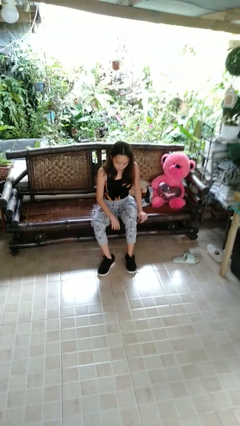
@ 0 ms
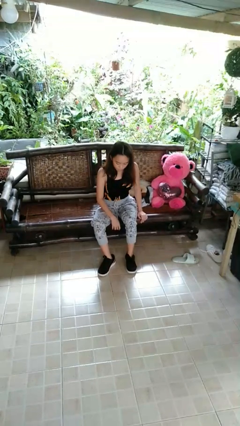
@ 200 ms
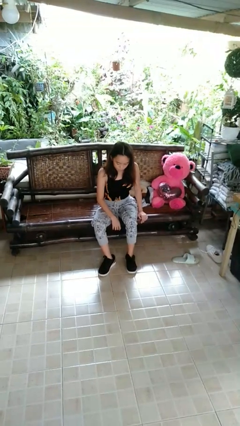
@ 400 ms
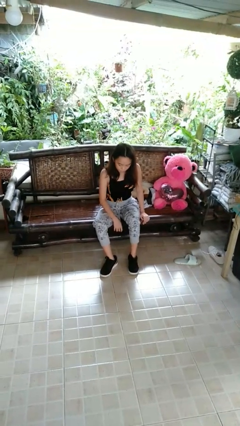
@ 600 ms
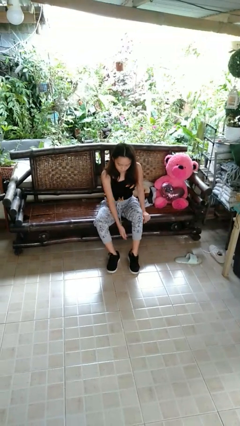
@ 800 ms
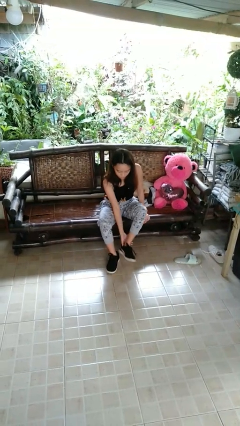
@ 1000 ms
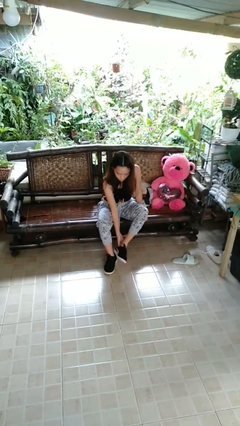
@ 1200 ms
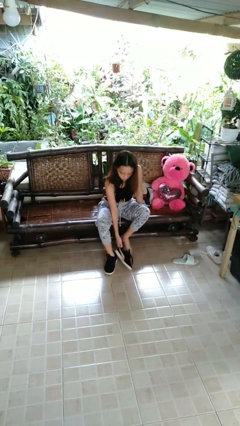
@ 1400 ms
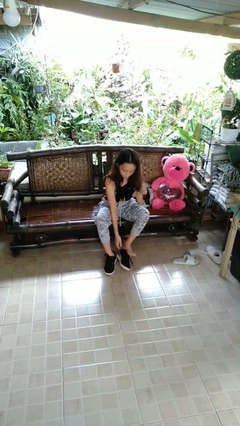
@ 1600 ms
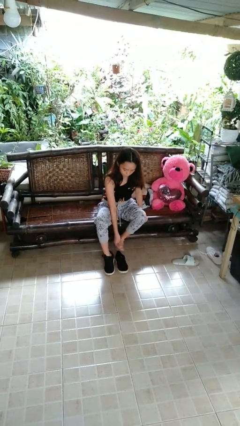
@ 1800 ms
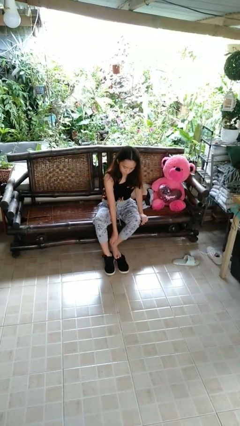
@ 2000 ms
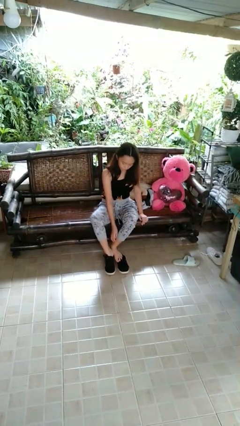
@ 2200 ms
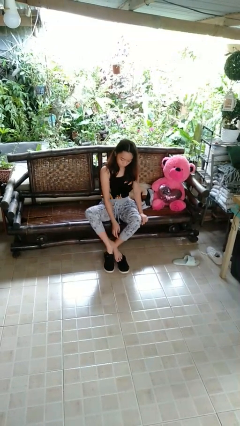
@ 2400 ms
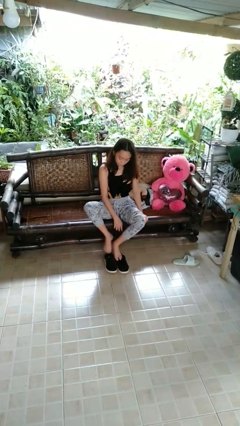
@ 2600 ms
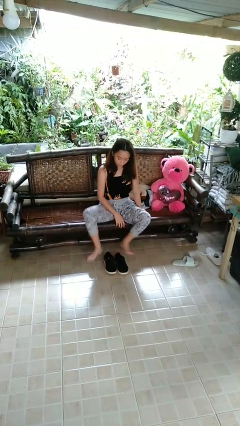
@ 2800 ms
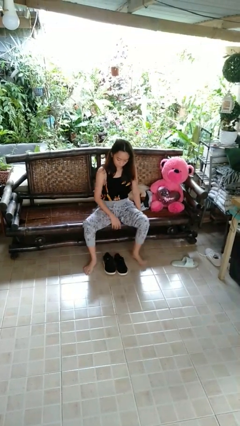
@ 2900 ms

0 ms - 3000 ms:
person takes off shoes

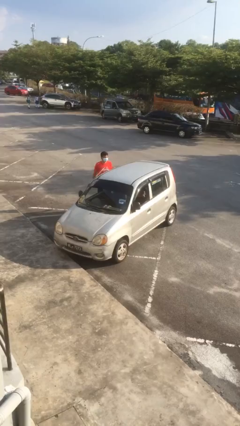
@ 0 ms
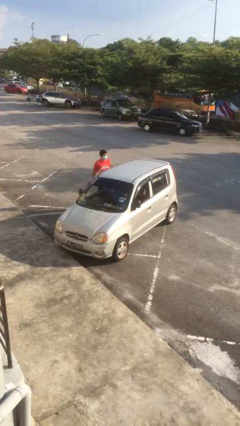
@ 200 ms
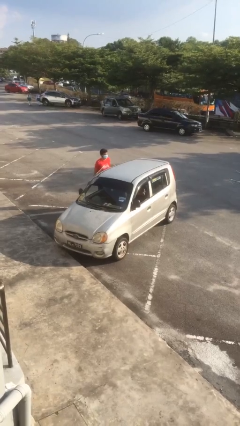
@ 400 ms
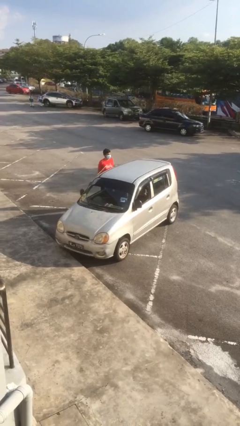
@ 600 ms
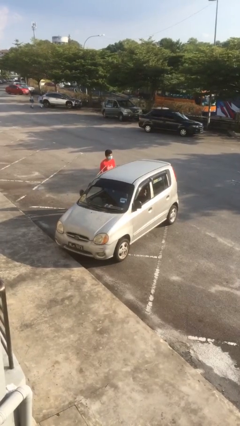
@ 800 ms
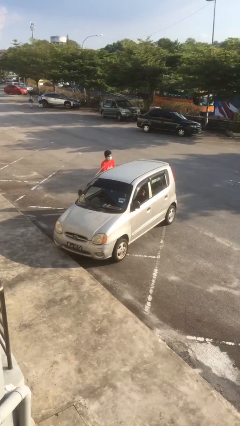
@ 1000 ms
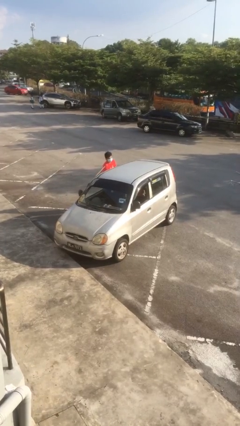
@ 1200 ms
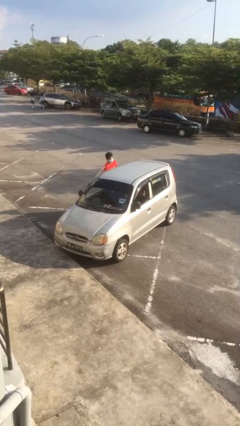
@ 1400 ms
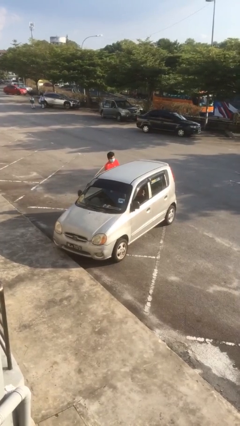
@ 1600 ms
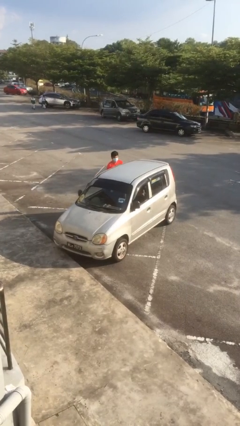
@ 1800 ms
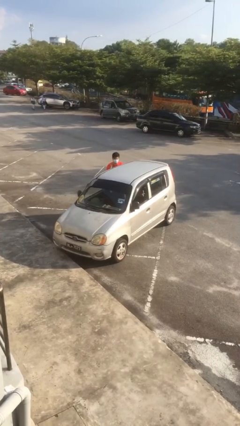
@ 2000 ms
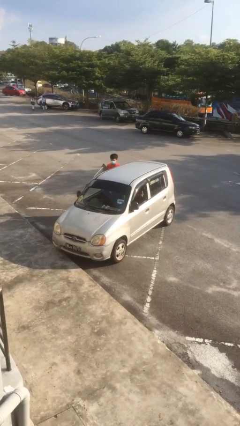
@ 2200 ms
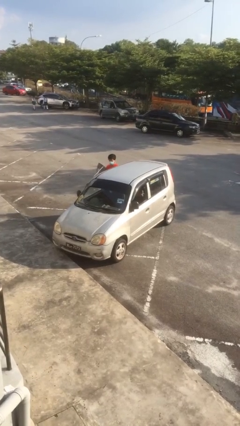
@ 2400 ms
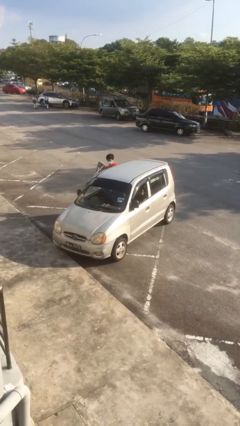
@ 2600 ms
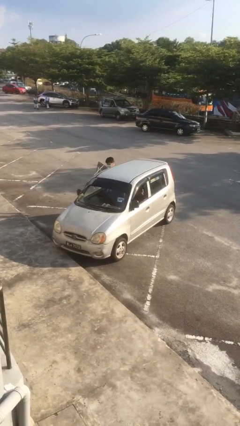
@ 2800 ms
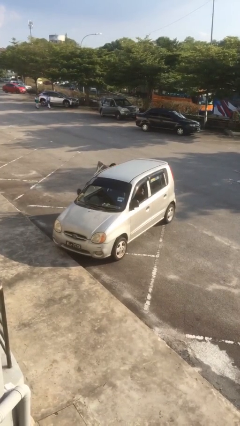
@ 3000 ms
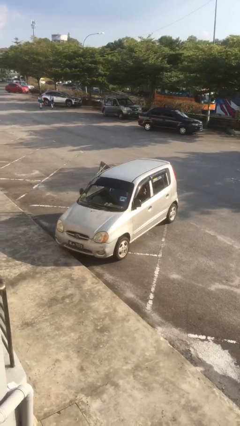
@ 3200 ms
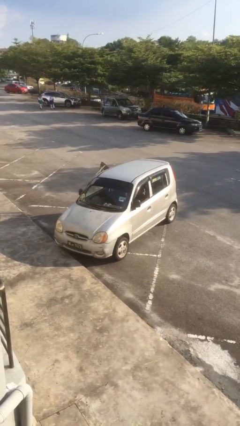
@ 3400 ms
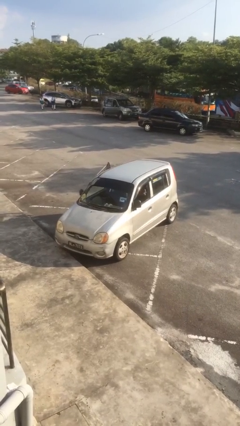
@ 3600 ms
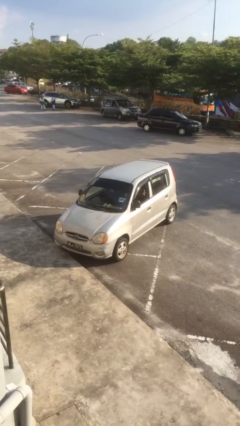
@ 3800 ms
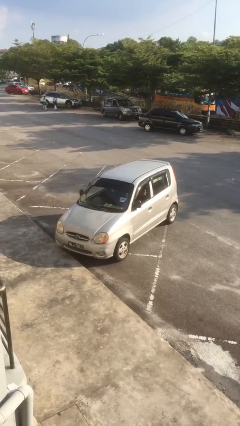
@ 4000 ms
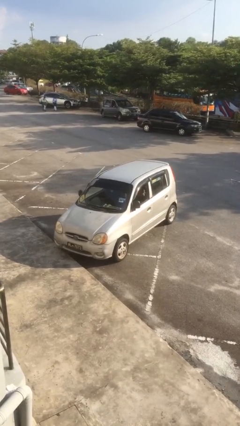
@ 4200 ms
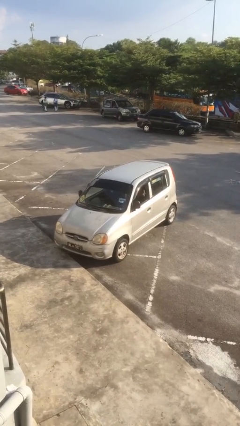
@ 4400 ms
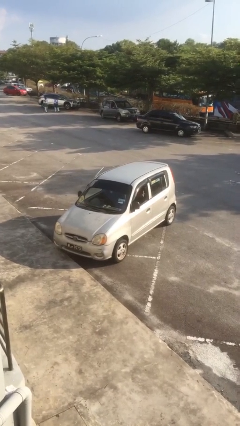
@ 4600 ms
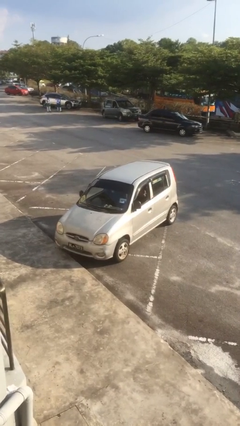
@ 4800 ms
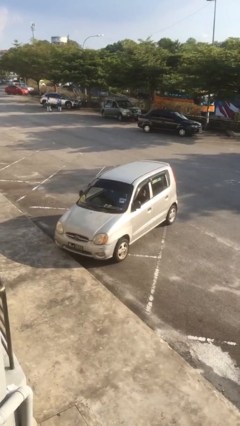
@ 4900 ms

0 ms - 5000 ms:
car picks up person

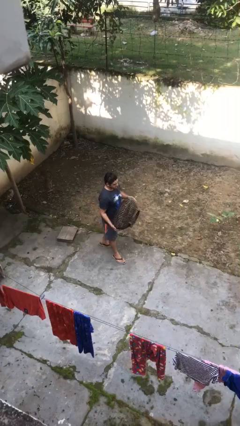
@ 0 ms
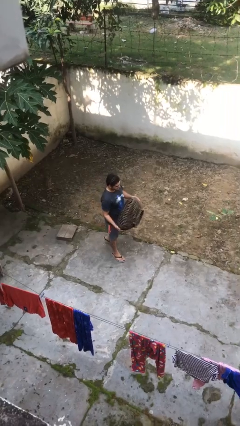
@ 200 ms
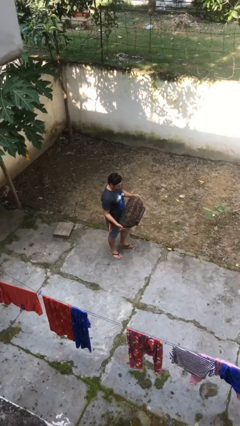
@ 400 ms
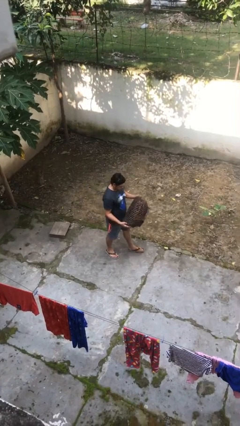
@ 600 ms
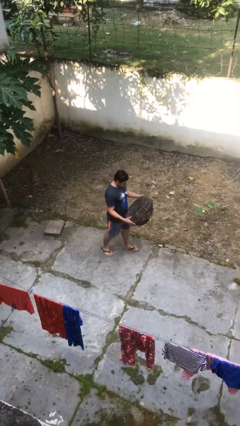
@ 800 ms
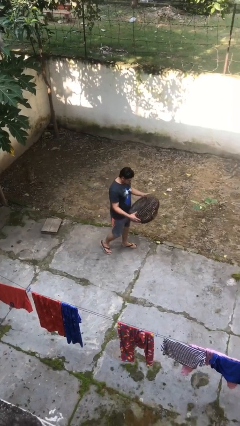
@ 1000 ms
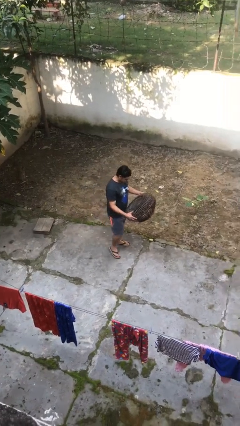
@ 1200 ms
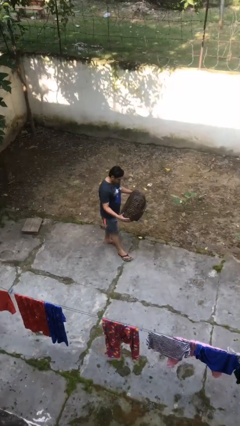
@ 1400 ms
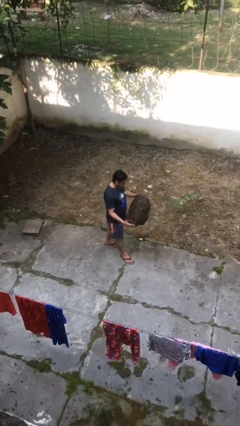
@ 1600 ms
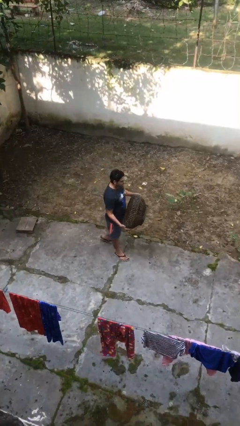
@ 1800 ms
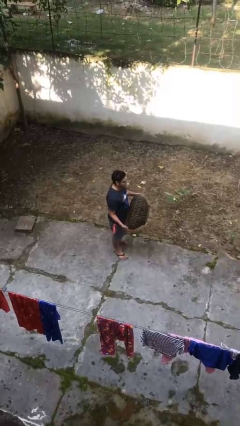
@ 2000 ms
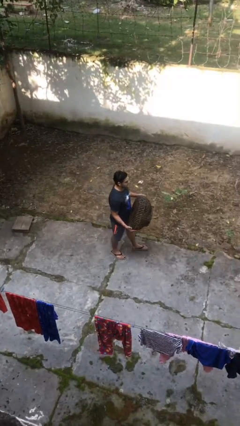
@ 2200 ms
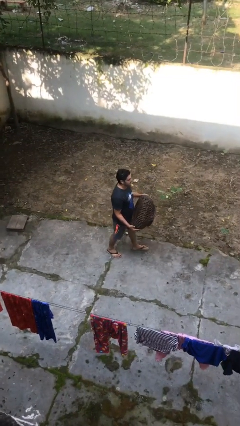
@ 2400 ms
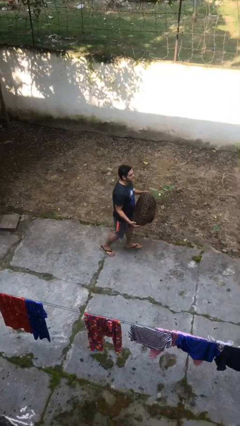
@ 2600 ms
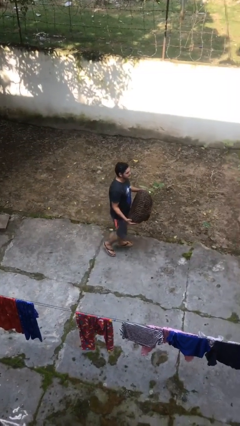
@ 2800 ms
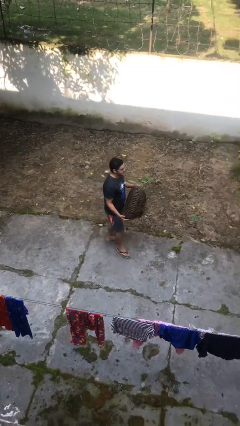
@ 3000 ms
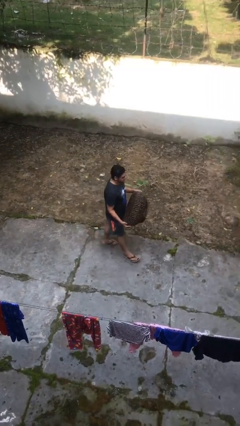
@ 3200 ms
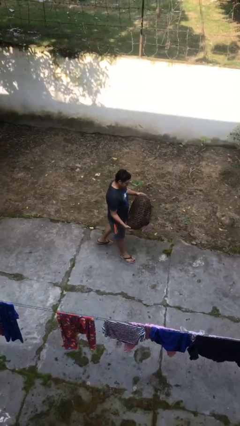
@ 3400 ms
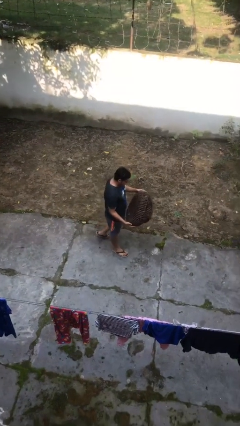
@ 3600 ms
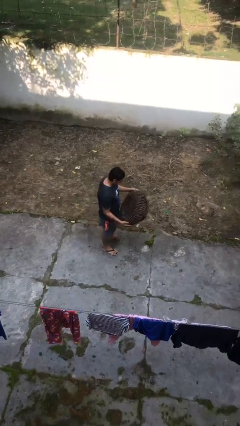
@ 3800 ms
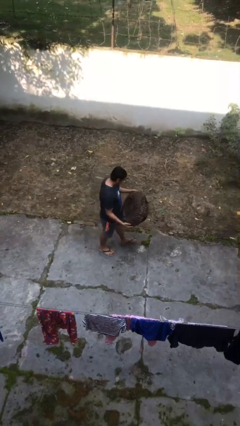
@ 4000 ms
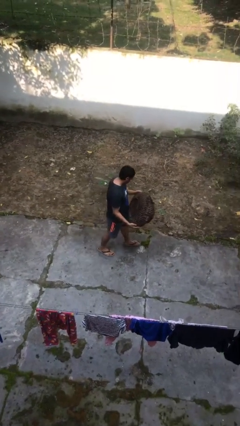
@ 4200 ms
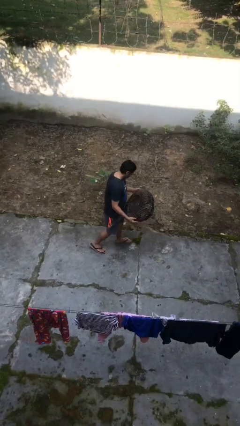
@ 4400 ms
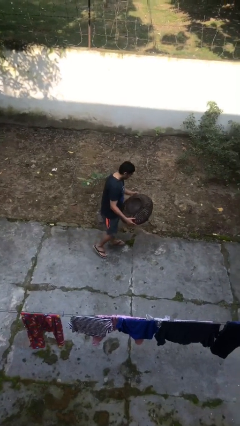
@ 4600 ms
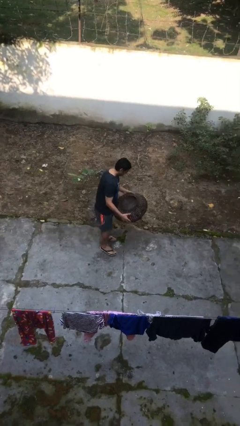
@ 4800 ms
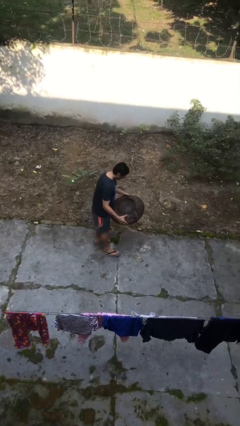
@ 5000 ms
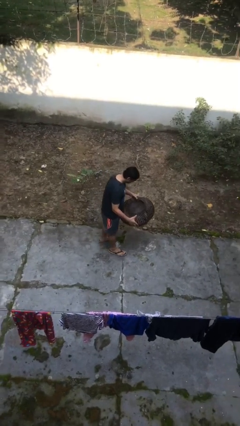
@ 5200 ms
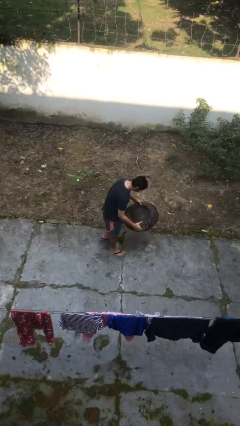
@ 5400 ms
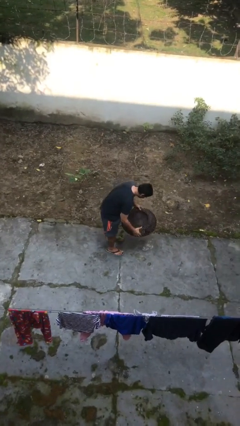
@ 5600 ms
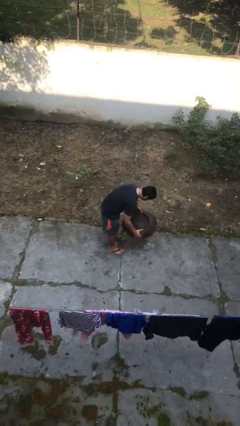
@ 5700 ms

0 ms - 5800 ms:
person carries heavy object

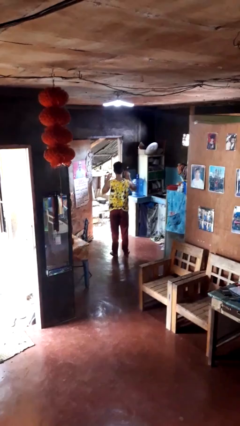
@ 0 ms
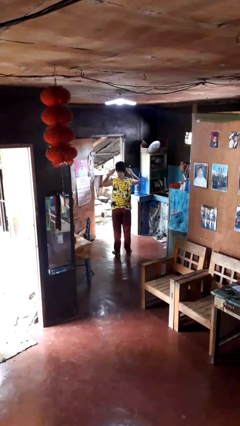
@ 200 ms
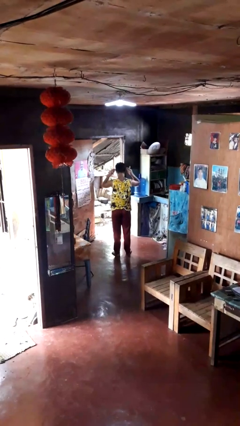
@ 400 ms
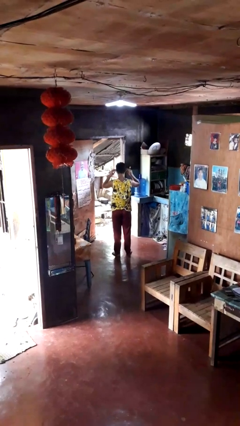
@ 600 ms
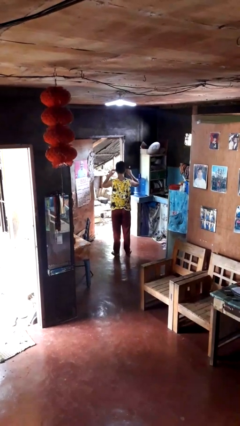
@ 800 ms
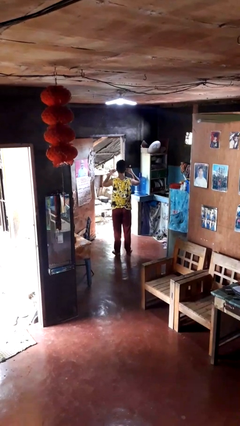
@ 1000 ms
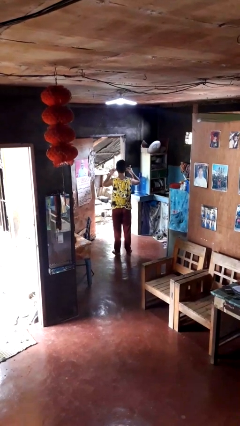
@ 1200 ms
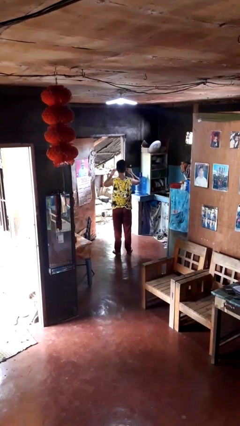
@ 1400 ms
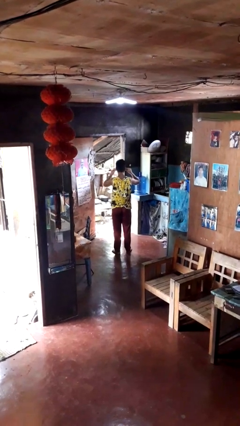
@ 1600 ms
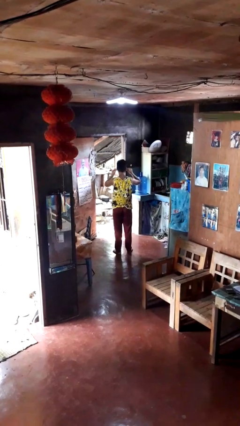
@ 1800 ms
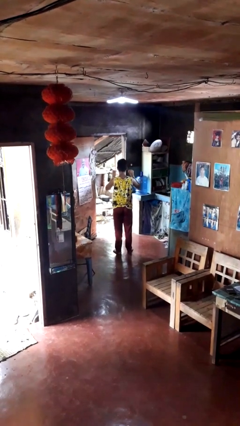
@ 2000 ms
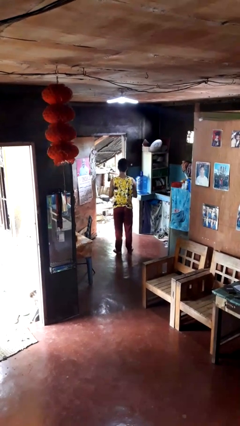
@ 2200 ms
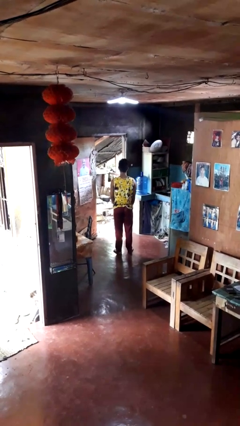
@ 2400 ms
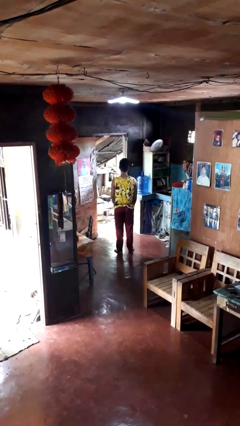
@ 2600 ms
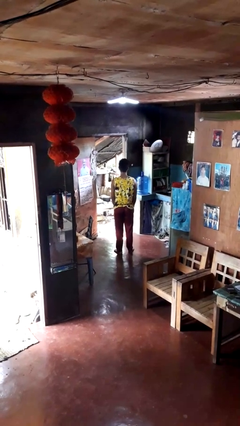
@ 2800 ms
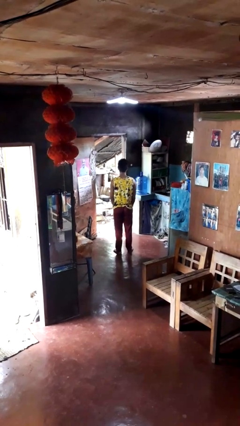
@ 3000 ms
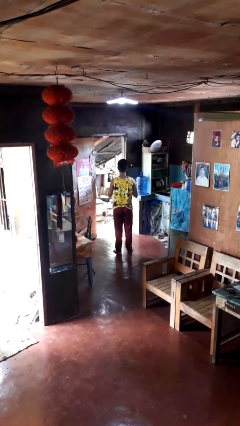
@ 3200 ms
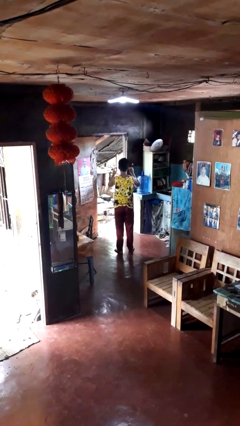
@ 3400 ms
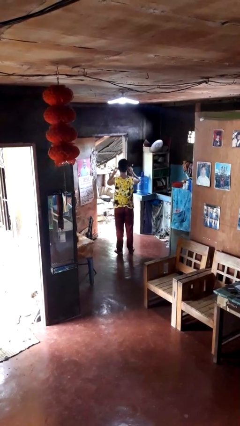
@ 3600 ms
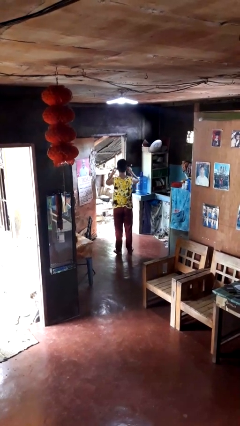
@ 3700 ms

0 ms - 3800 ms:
person puts on headphones

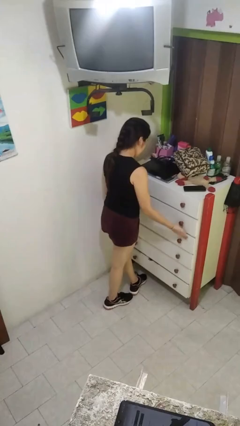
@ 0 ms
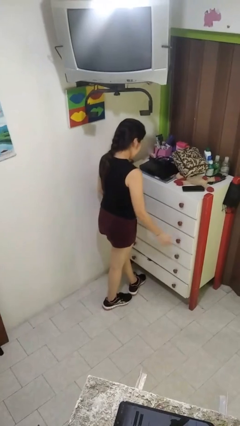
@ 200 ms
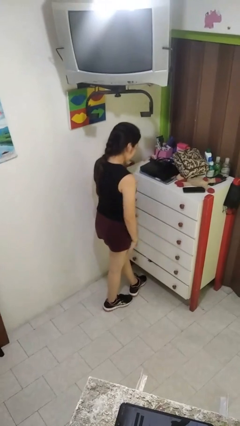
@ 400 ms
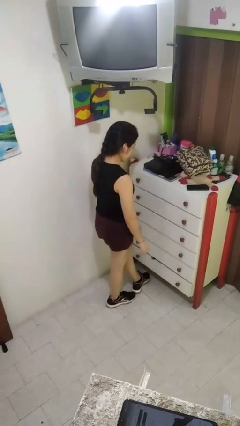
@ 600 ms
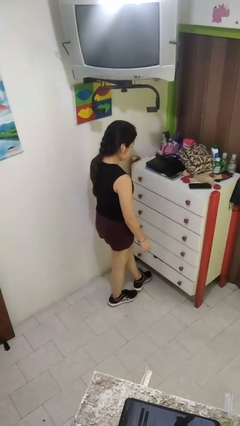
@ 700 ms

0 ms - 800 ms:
person closes dresser drawer
